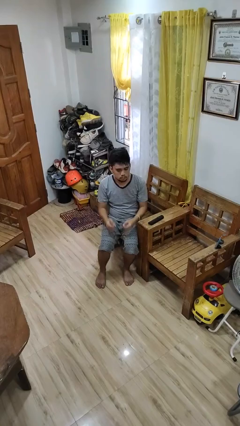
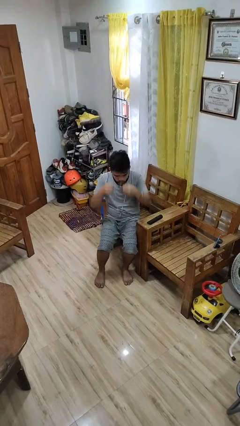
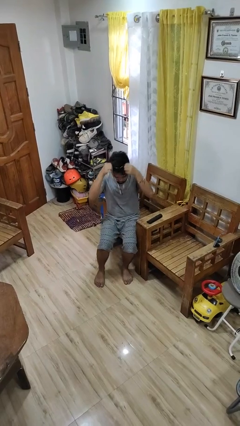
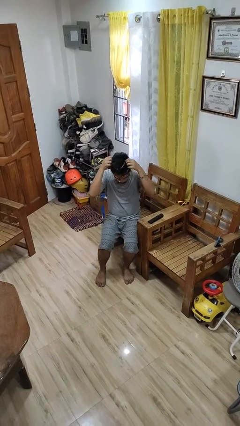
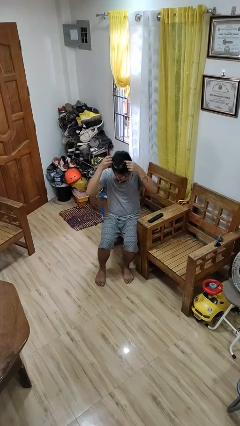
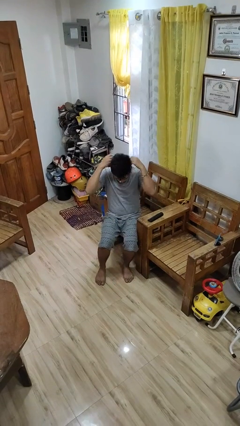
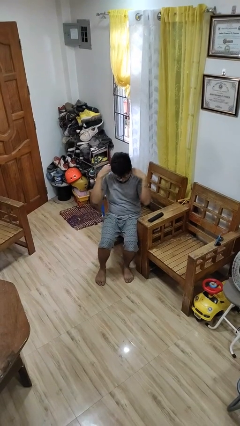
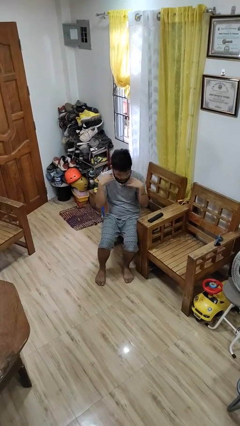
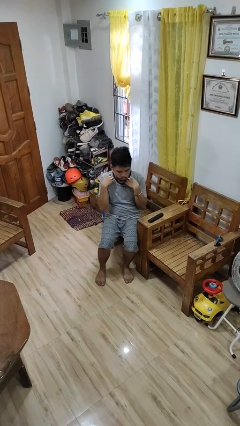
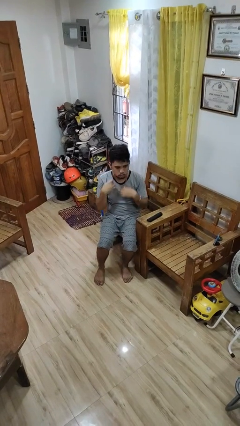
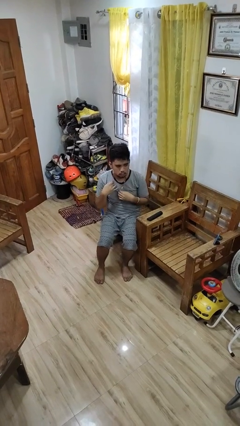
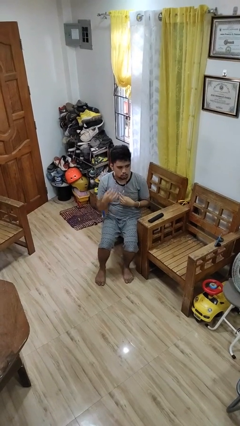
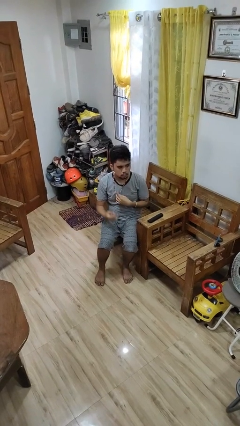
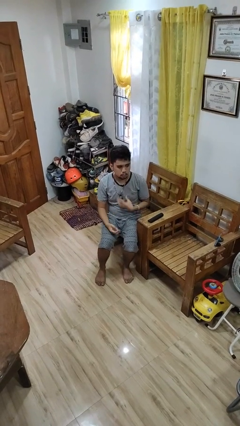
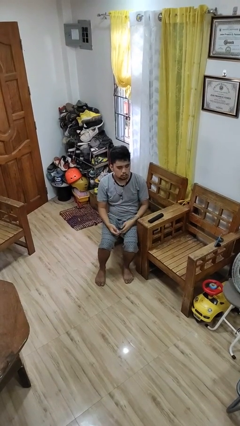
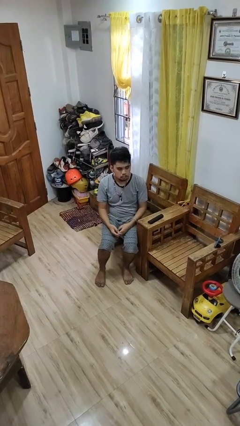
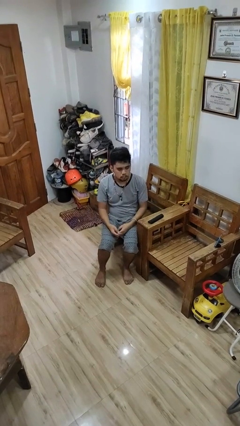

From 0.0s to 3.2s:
person puts on necklace

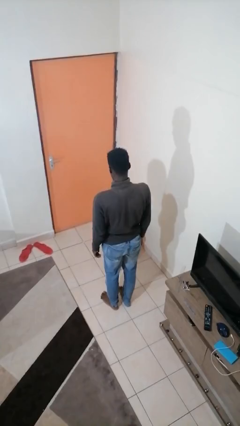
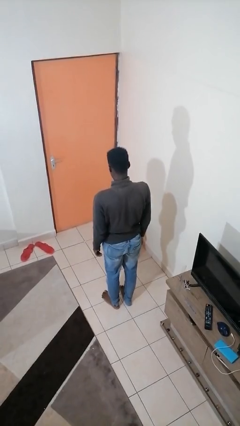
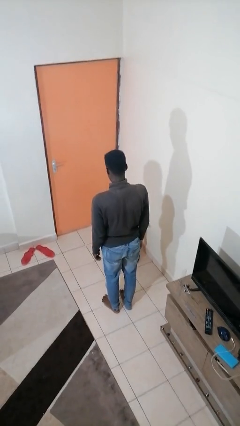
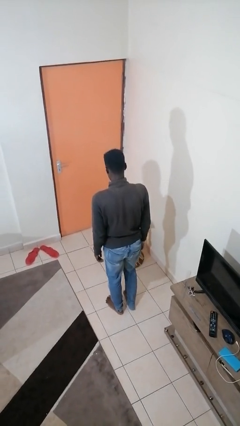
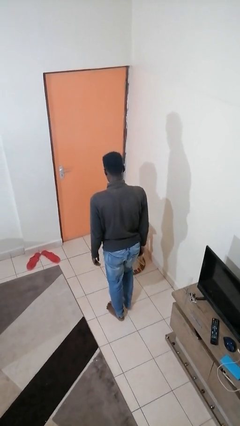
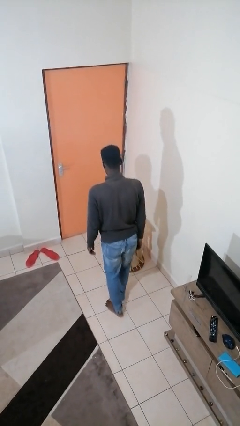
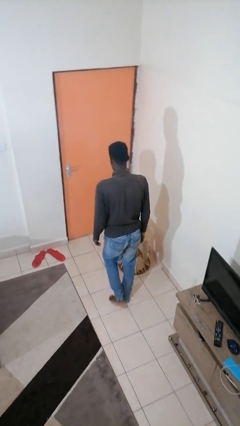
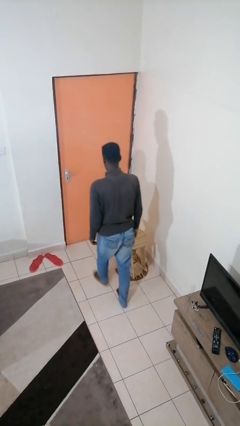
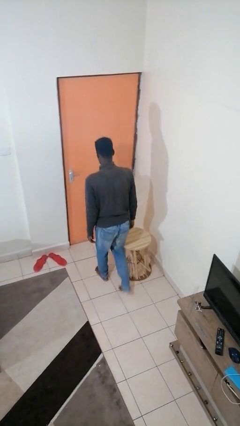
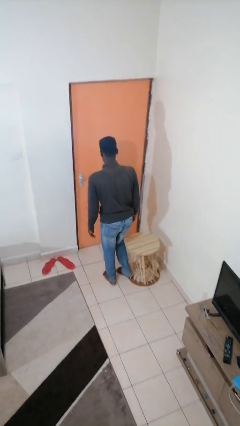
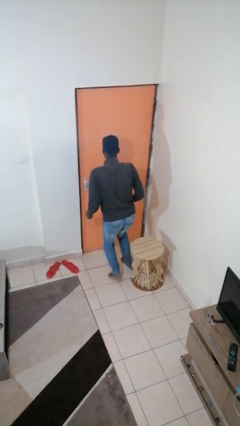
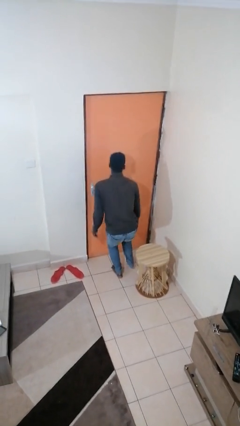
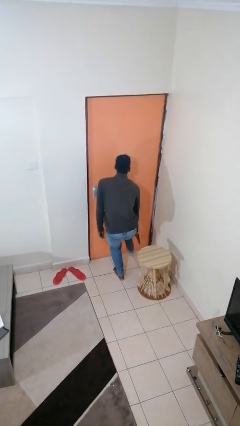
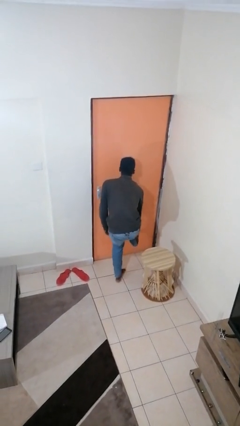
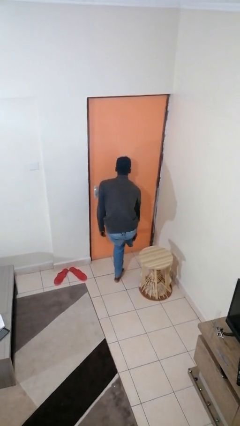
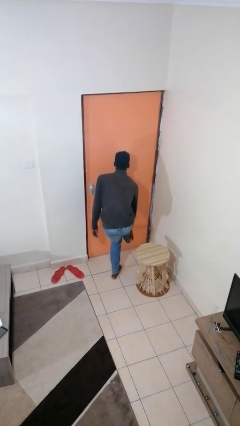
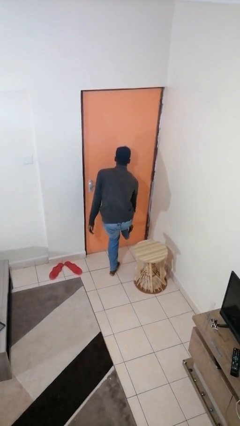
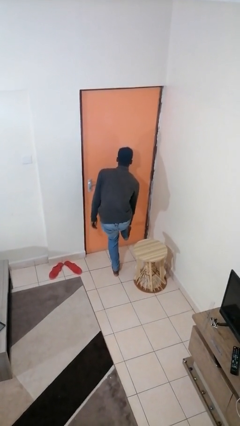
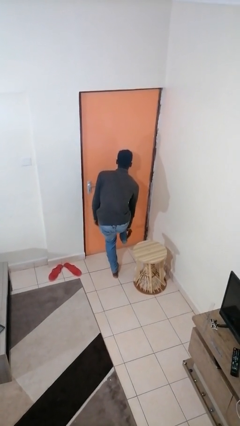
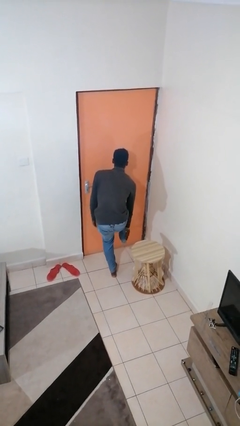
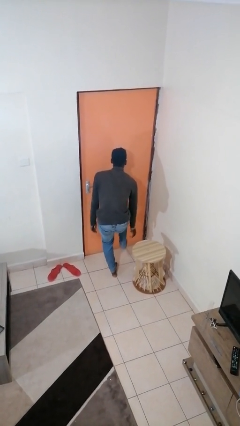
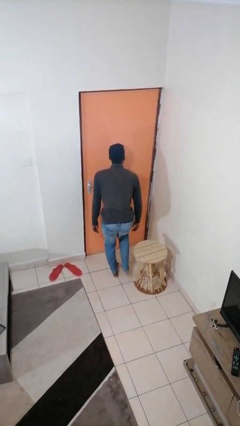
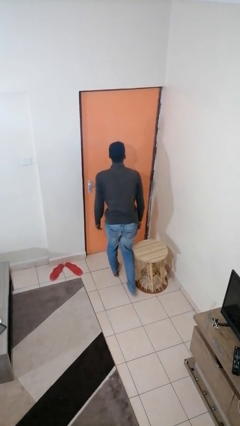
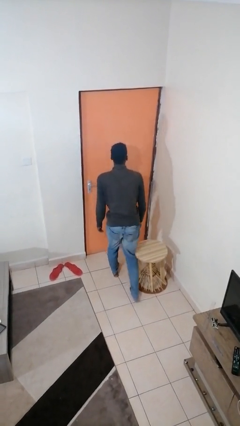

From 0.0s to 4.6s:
person stubs toe

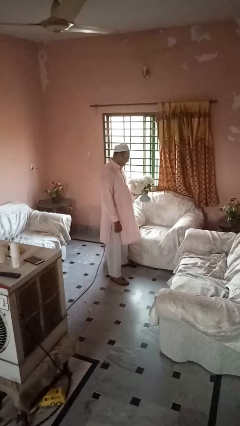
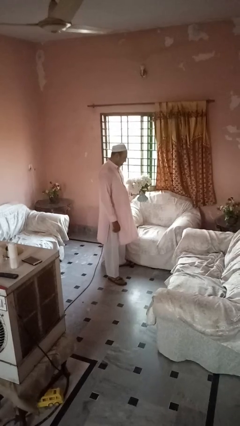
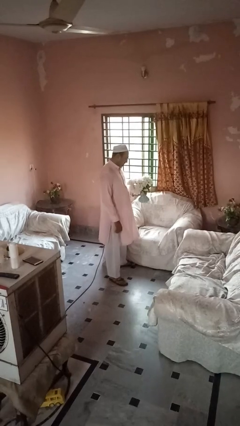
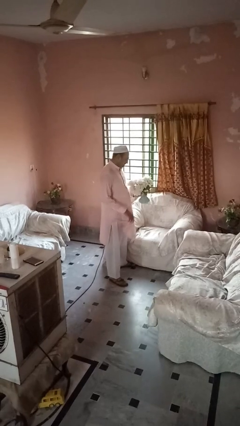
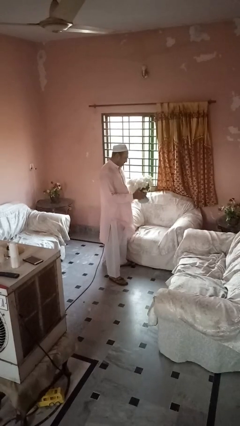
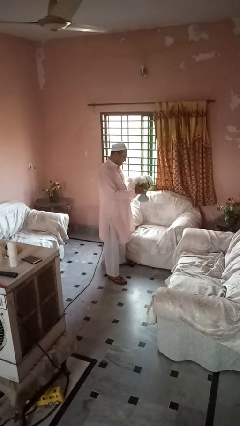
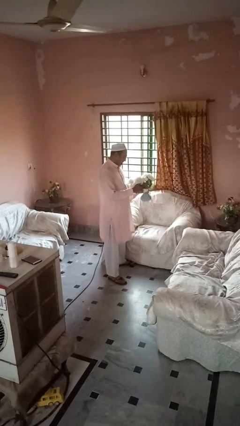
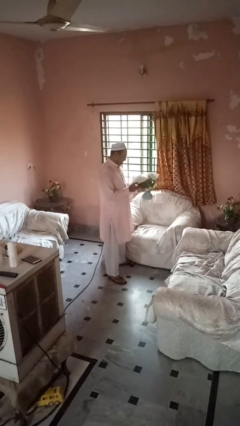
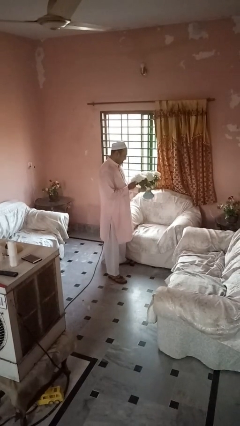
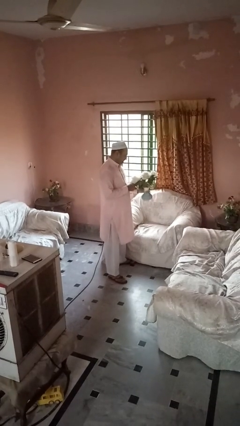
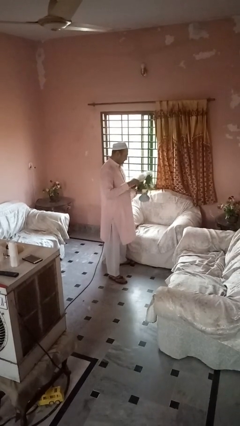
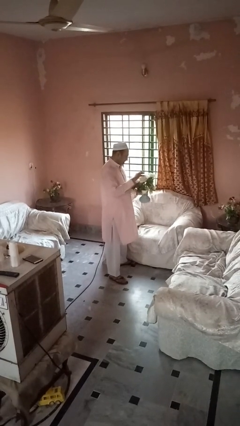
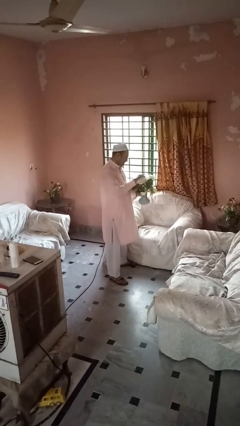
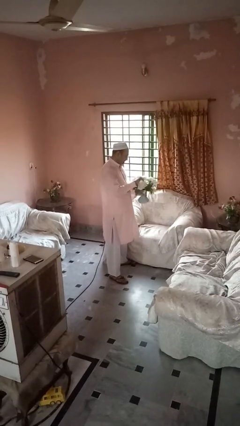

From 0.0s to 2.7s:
person arranges flowers in vase

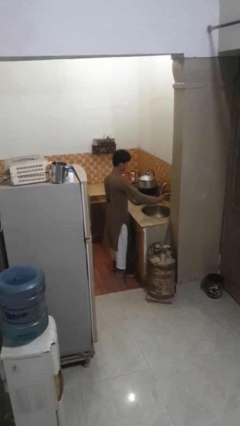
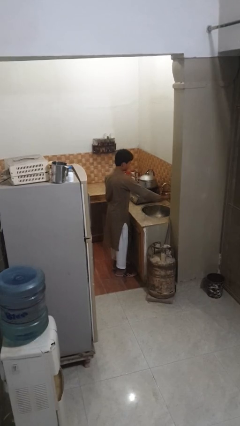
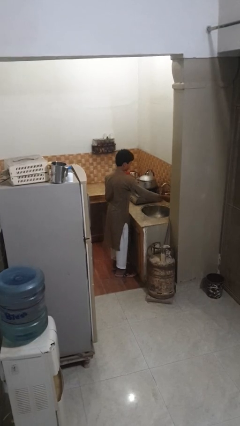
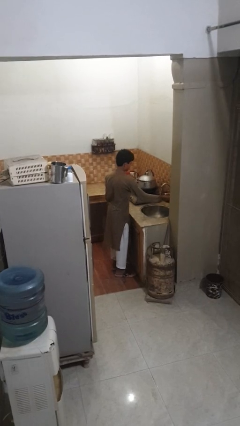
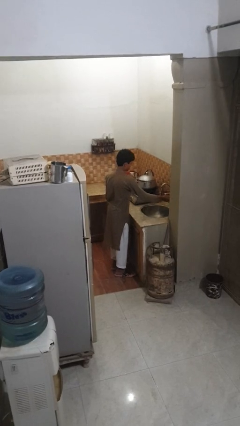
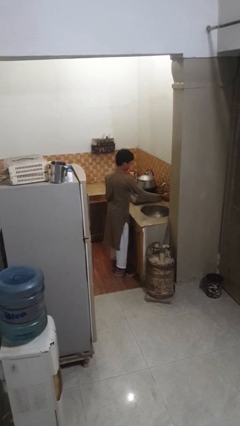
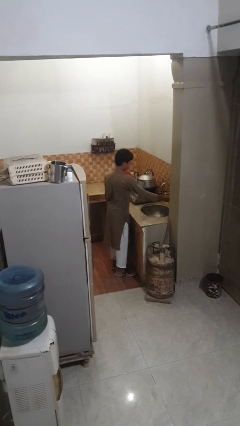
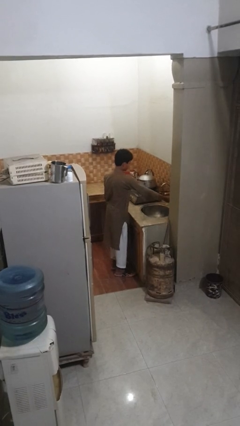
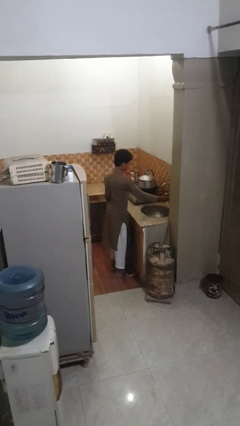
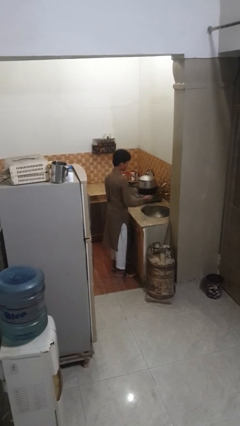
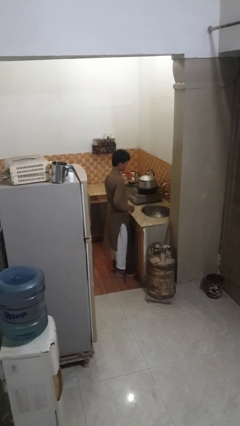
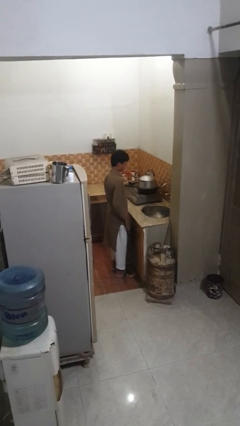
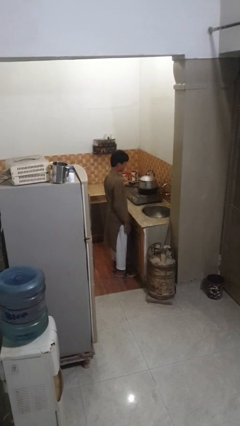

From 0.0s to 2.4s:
person turns off faucet

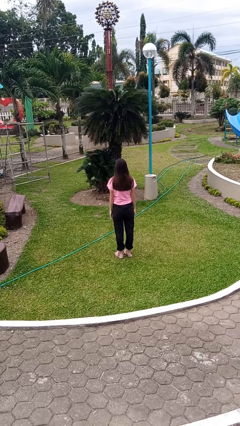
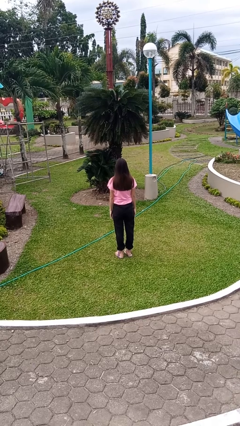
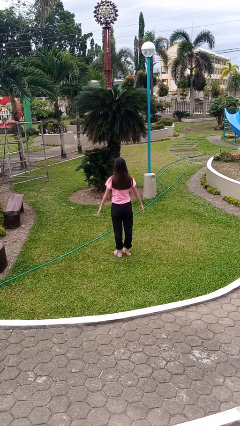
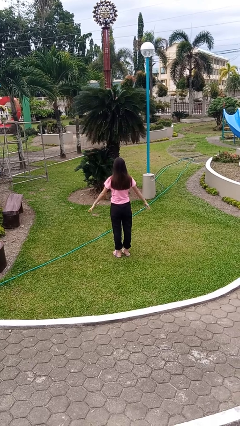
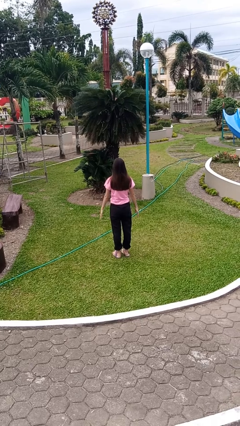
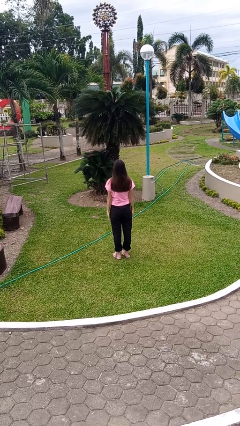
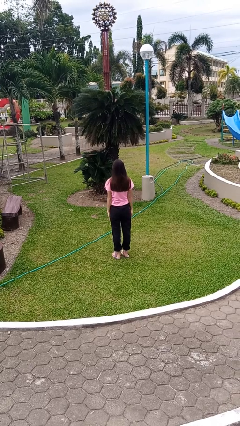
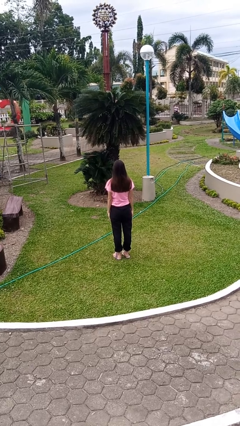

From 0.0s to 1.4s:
person slaps hands on thighs

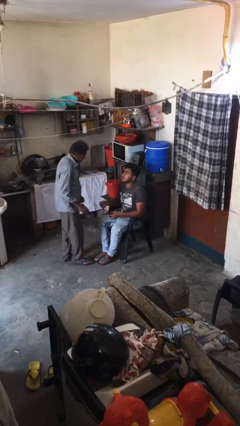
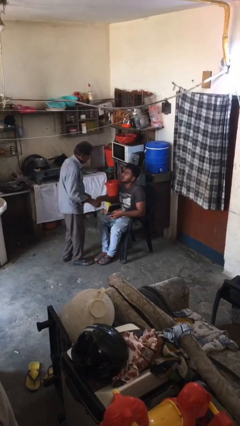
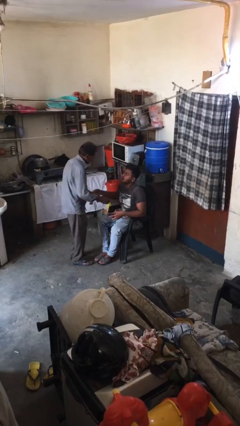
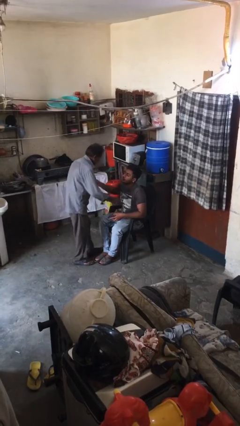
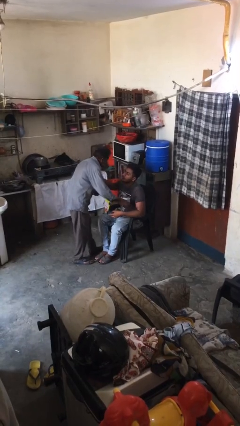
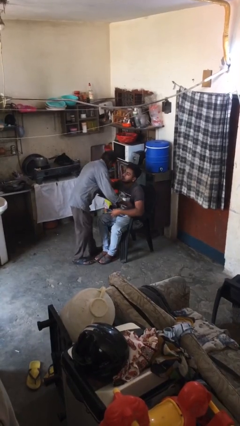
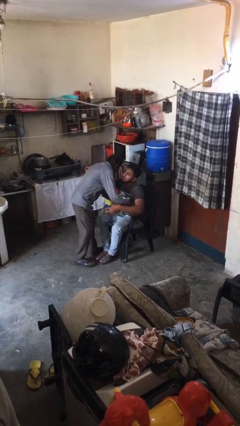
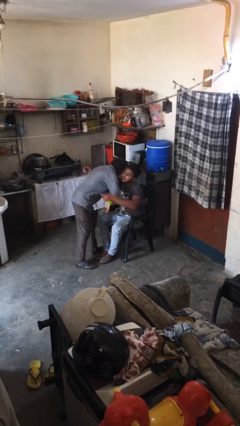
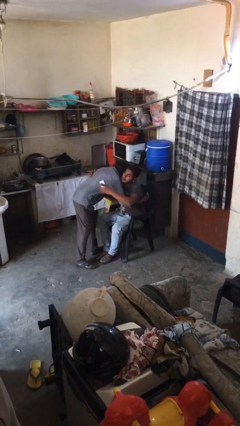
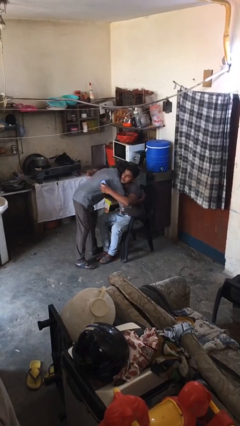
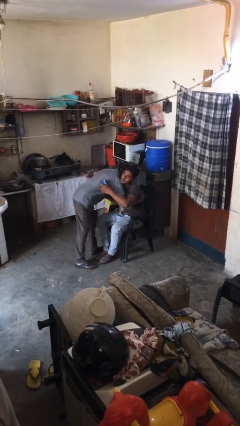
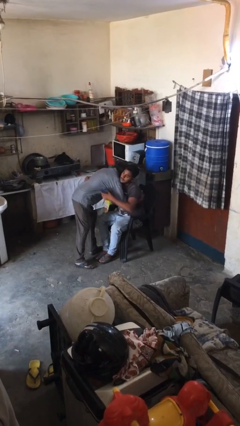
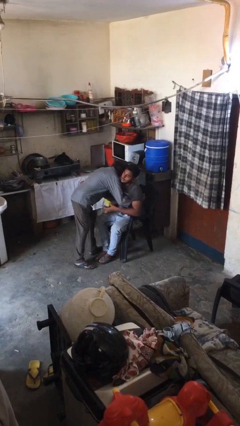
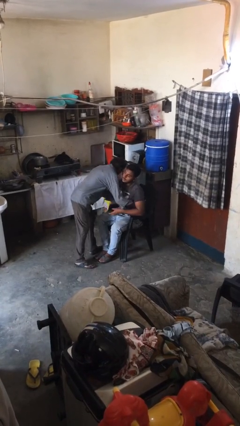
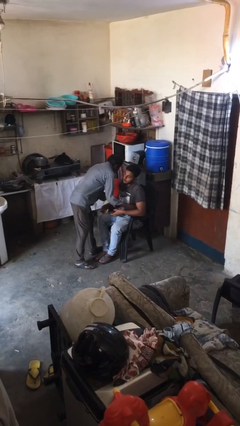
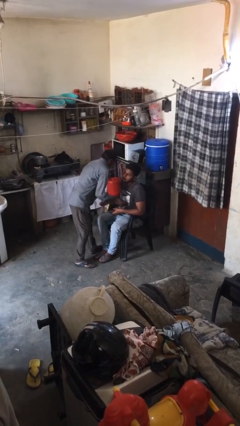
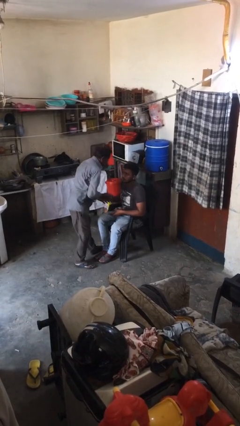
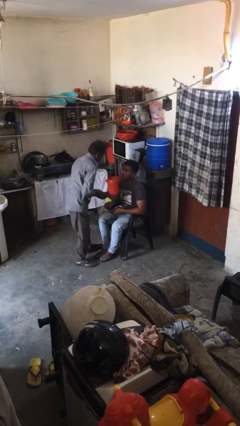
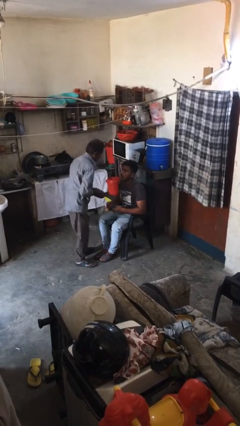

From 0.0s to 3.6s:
person embraces person
